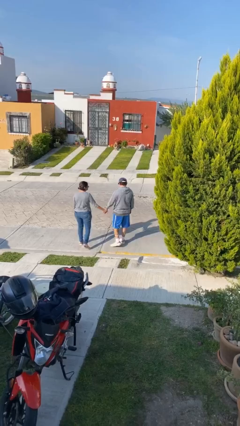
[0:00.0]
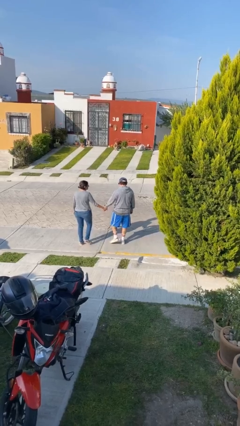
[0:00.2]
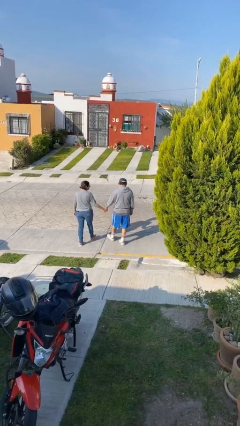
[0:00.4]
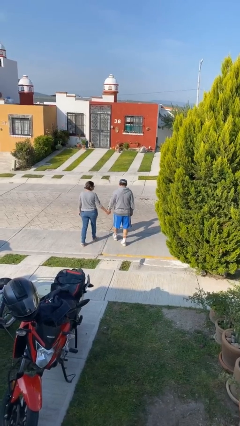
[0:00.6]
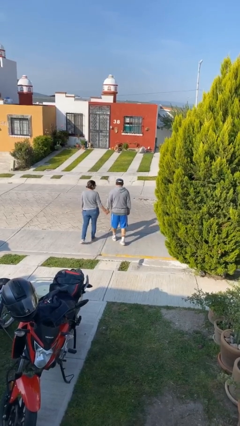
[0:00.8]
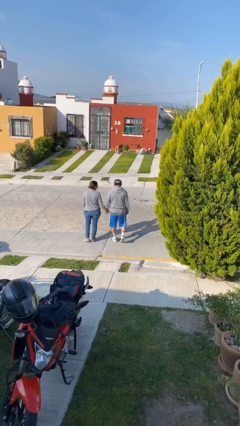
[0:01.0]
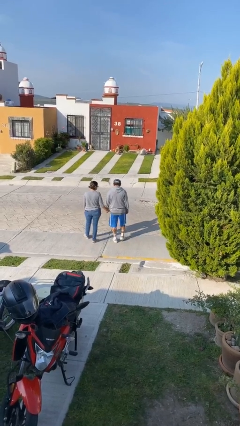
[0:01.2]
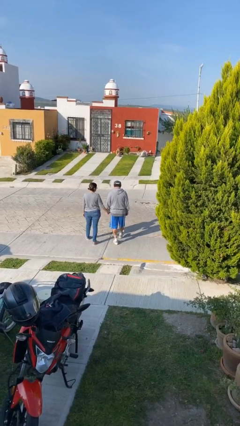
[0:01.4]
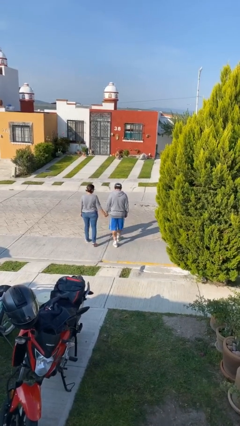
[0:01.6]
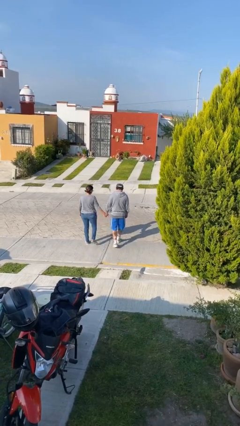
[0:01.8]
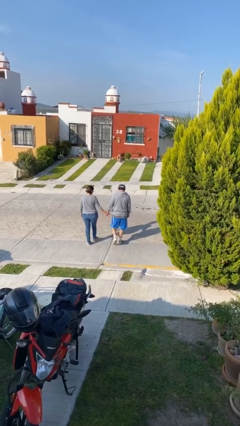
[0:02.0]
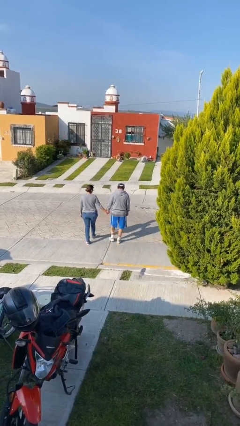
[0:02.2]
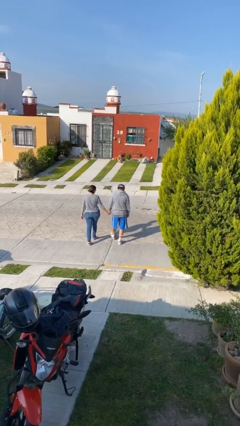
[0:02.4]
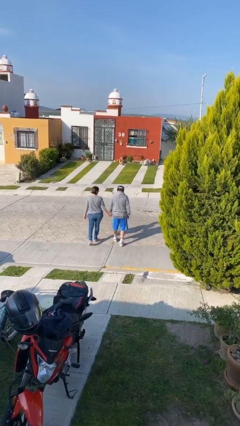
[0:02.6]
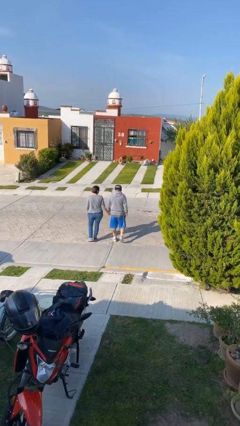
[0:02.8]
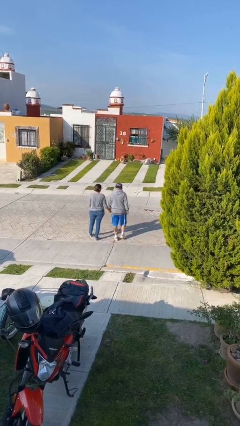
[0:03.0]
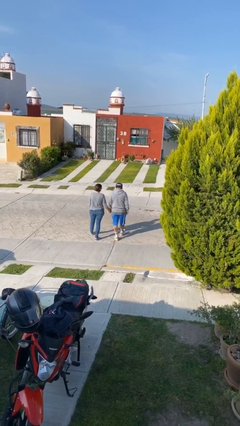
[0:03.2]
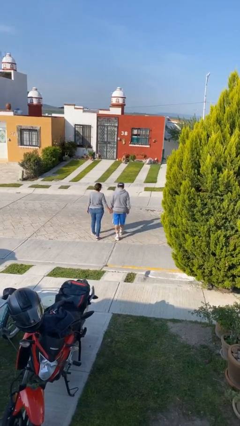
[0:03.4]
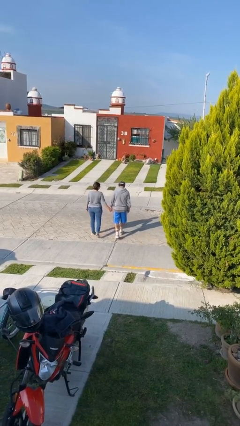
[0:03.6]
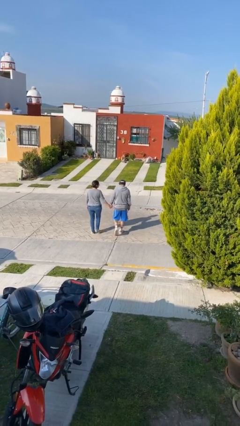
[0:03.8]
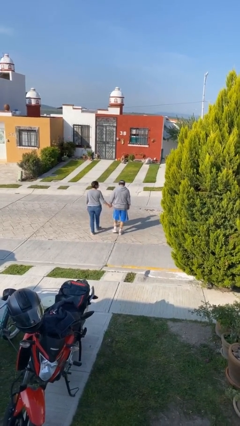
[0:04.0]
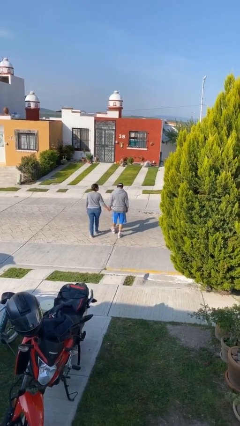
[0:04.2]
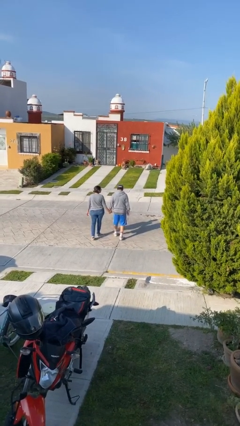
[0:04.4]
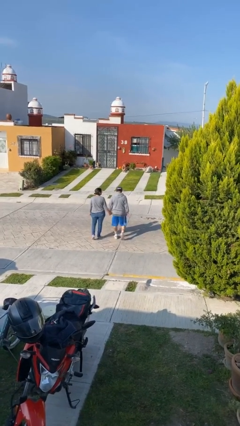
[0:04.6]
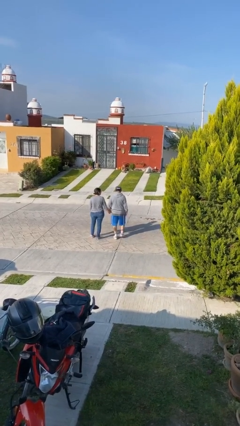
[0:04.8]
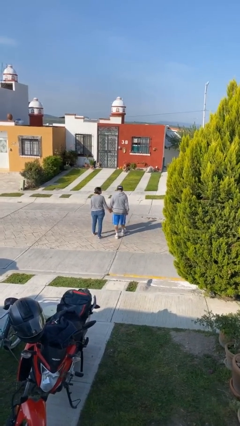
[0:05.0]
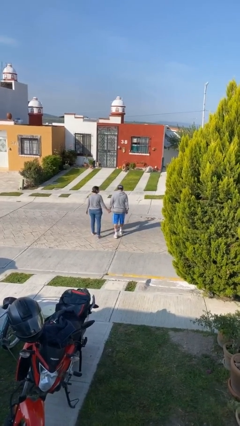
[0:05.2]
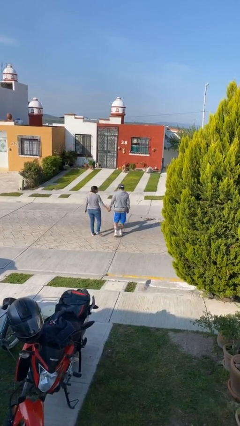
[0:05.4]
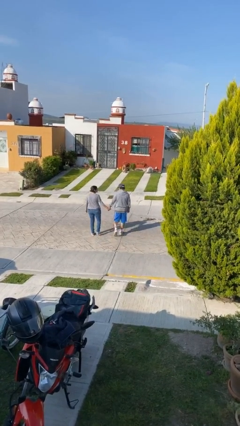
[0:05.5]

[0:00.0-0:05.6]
person holds hand

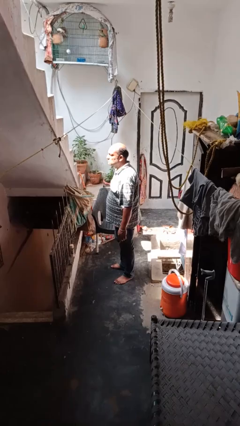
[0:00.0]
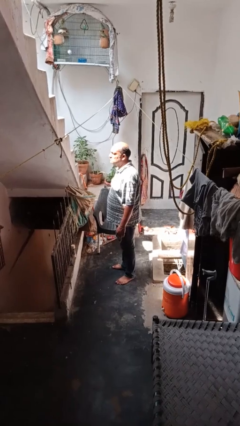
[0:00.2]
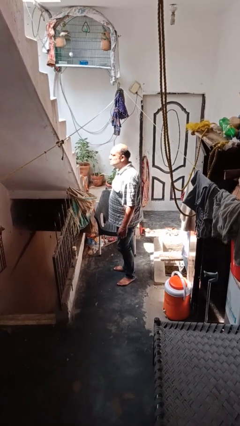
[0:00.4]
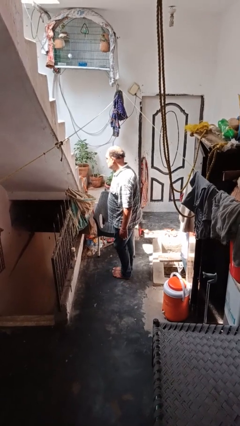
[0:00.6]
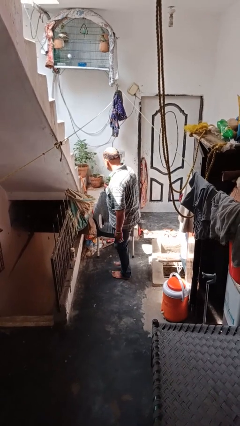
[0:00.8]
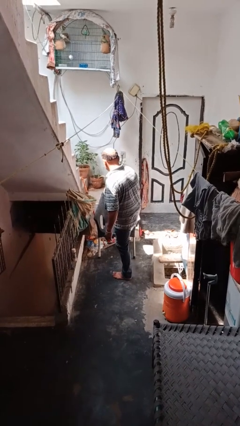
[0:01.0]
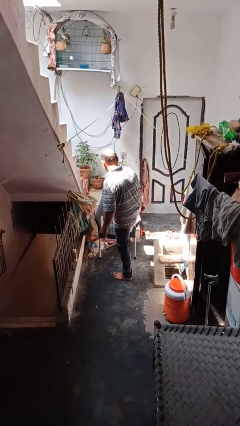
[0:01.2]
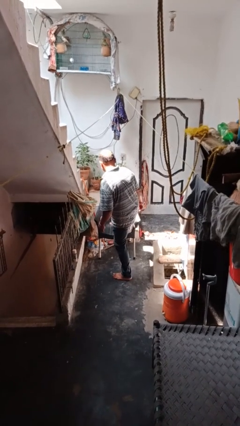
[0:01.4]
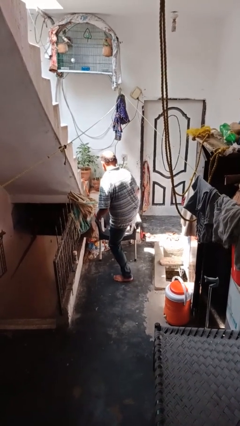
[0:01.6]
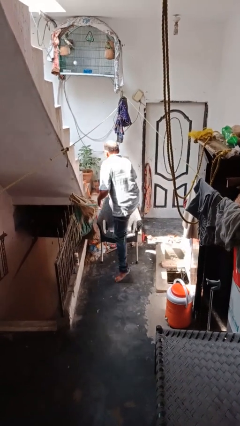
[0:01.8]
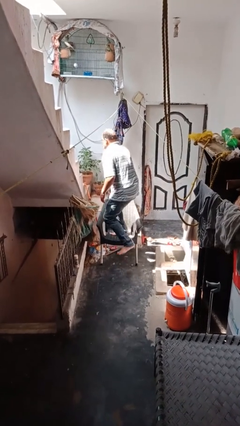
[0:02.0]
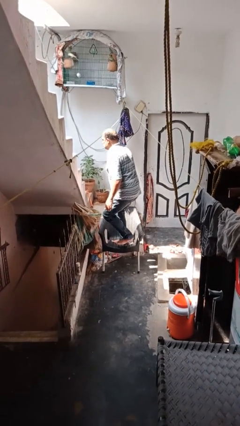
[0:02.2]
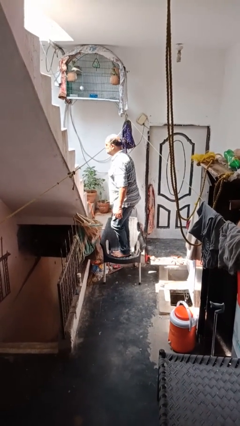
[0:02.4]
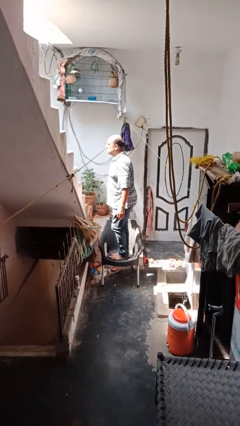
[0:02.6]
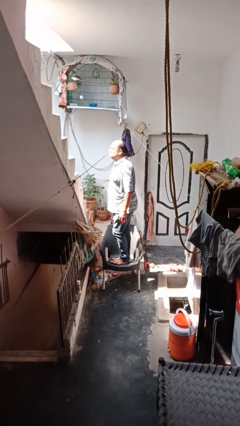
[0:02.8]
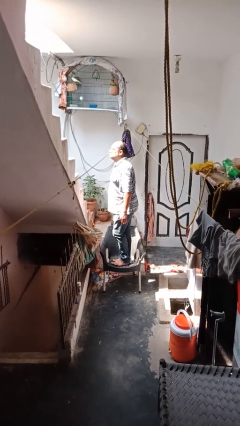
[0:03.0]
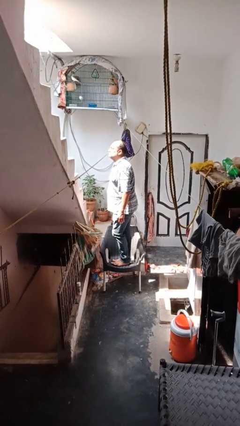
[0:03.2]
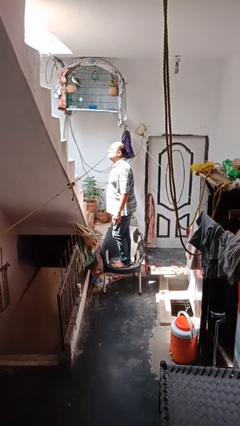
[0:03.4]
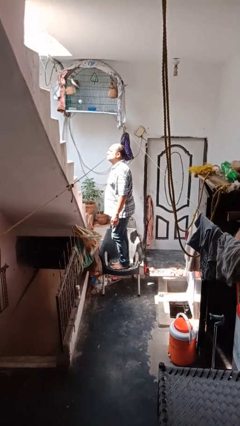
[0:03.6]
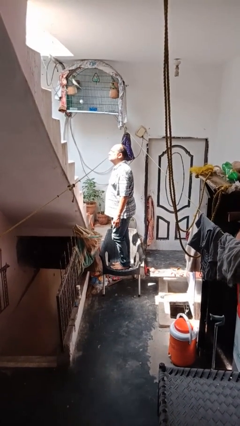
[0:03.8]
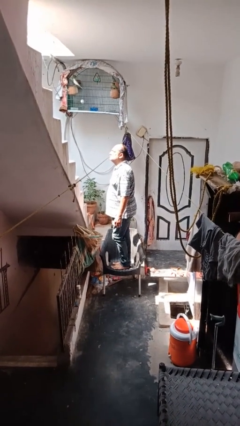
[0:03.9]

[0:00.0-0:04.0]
person climbs on chair

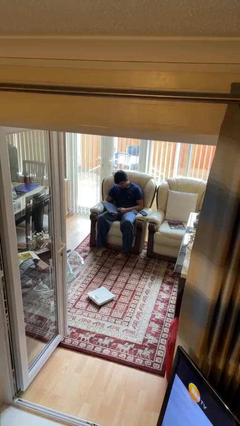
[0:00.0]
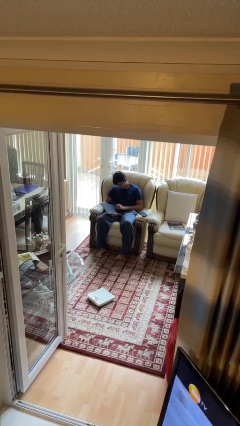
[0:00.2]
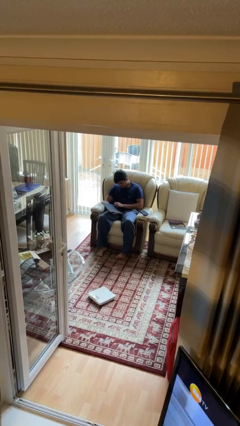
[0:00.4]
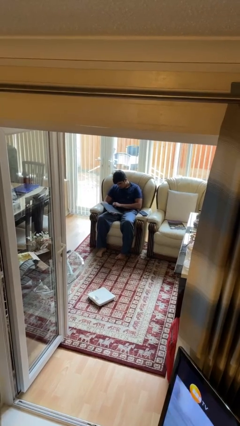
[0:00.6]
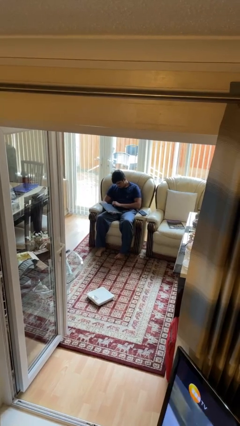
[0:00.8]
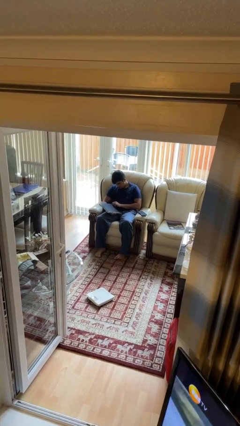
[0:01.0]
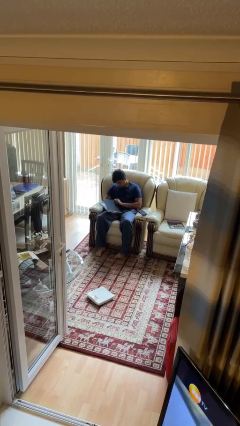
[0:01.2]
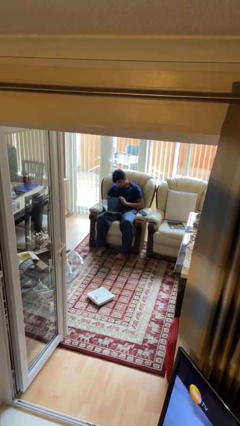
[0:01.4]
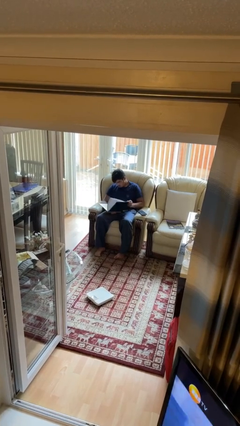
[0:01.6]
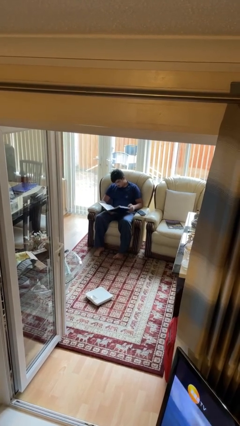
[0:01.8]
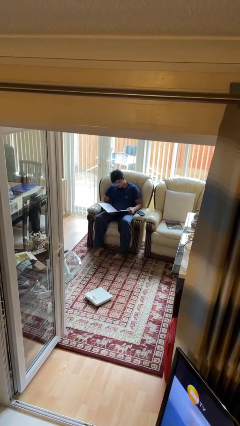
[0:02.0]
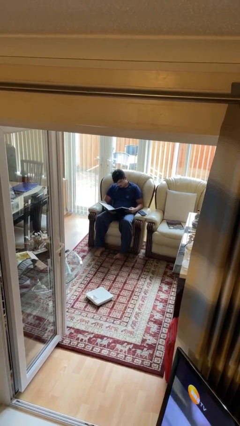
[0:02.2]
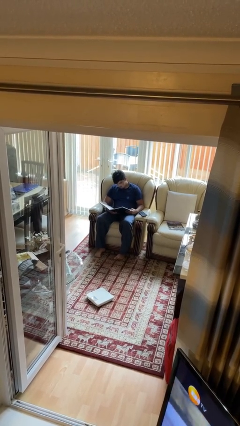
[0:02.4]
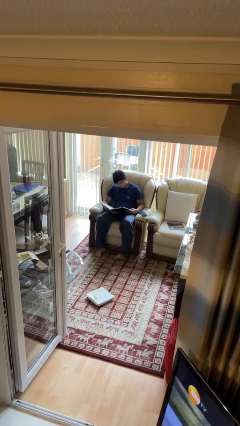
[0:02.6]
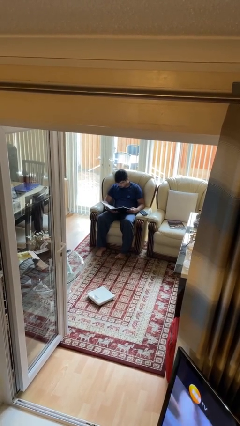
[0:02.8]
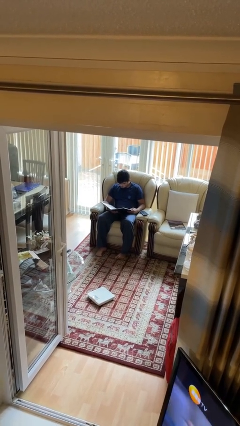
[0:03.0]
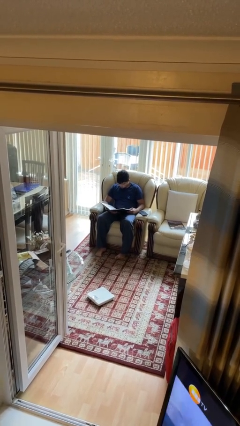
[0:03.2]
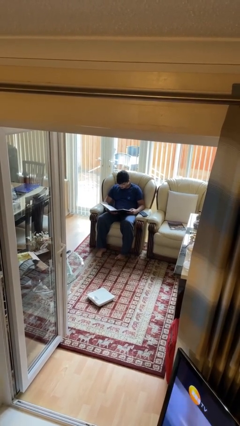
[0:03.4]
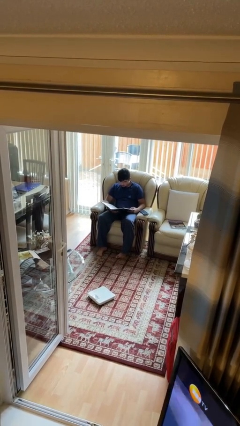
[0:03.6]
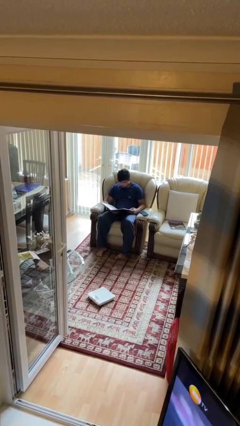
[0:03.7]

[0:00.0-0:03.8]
person reads book

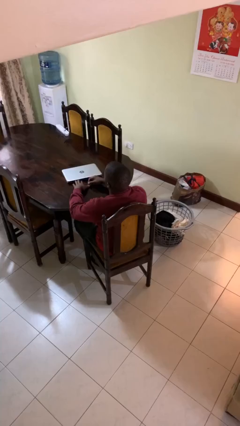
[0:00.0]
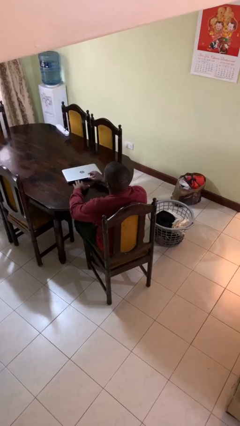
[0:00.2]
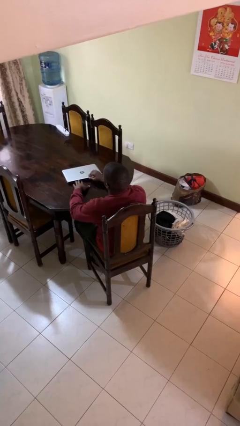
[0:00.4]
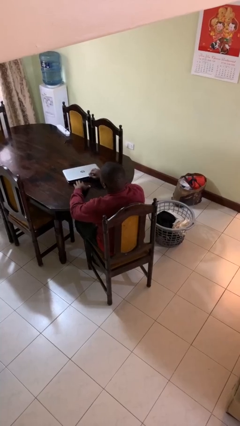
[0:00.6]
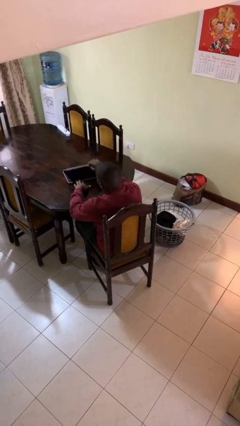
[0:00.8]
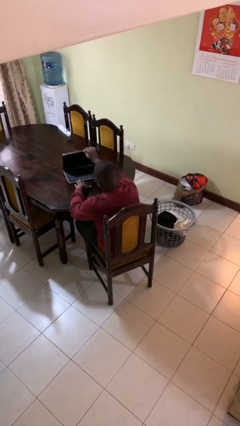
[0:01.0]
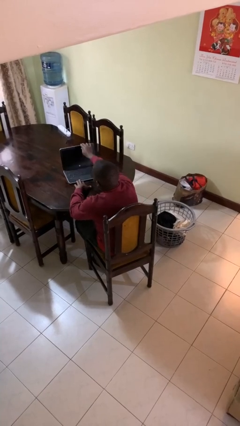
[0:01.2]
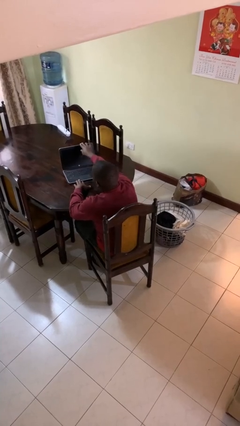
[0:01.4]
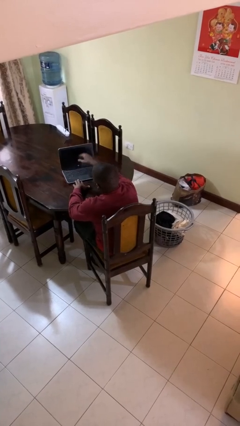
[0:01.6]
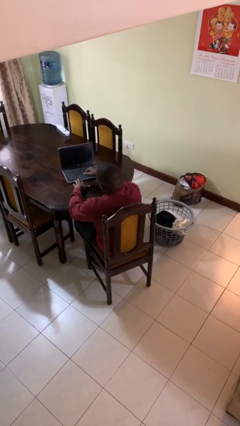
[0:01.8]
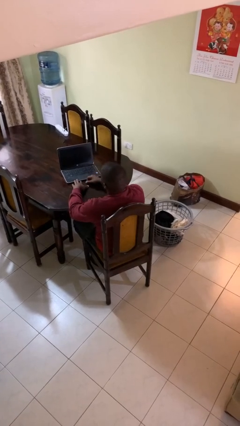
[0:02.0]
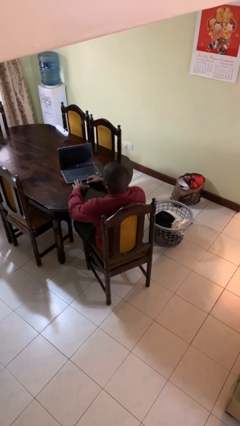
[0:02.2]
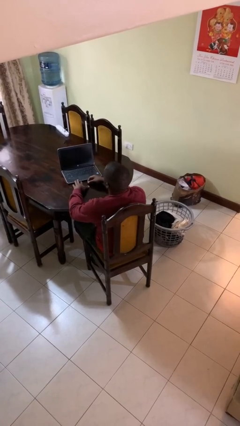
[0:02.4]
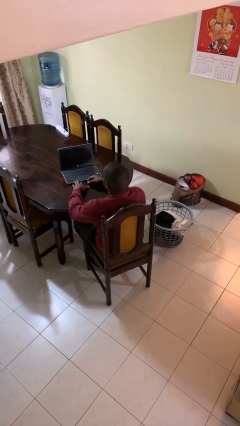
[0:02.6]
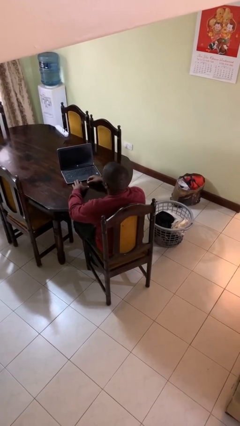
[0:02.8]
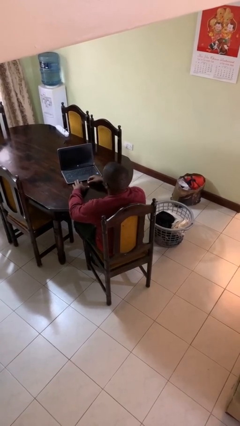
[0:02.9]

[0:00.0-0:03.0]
person opens laptop

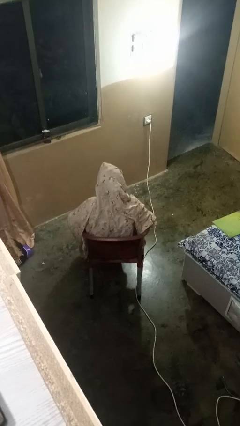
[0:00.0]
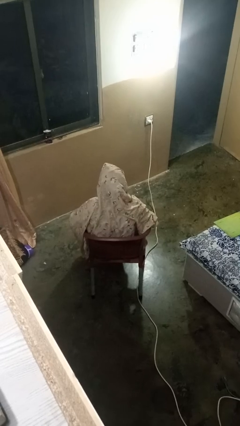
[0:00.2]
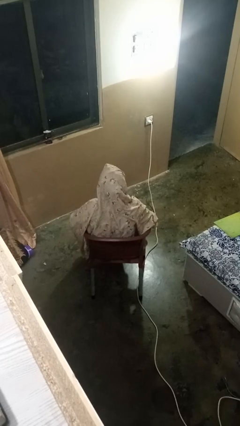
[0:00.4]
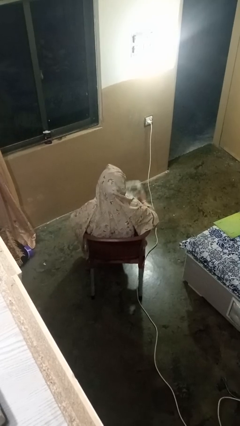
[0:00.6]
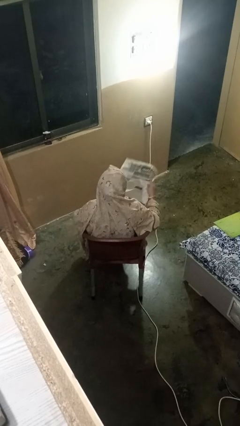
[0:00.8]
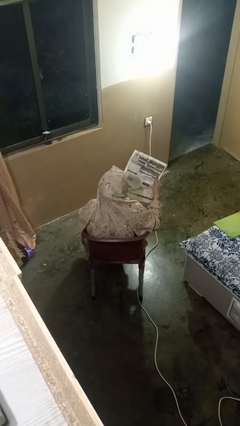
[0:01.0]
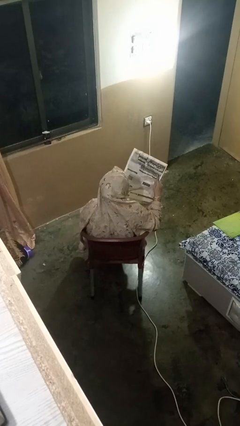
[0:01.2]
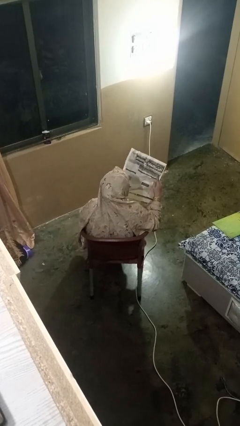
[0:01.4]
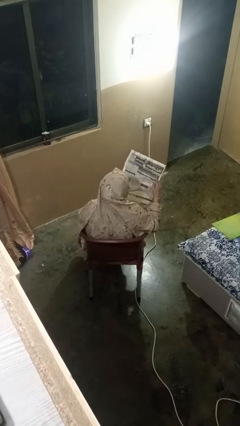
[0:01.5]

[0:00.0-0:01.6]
person reads newspaper
